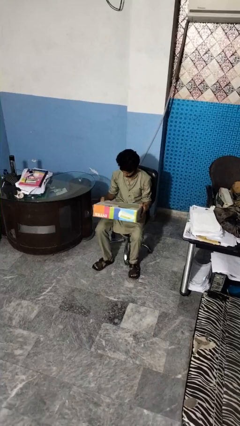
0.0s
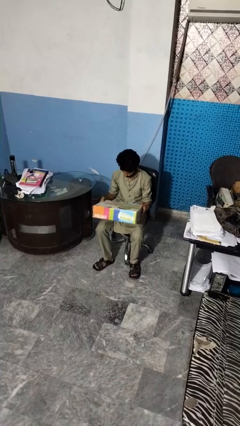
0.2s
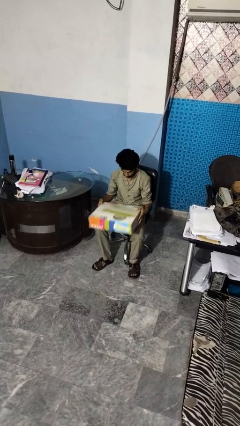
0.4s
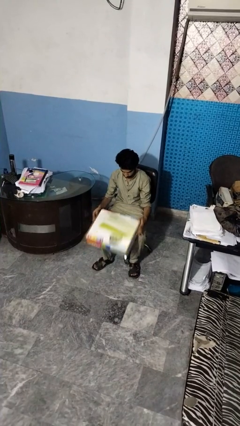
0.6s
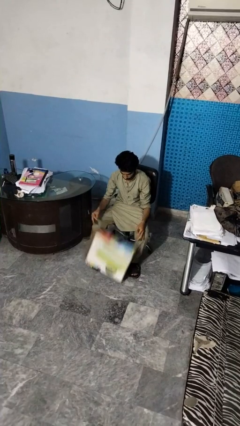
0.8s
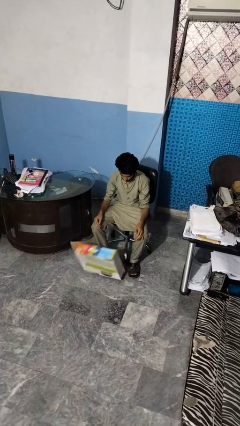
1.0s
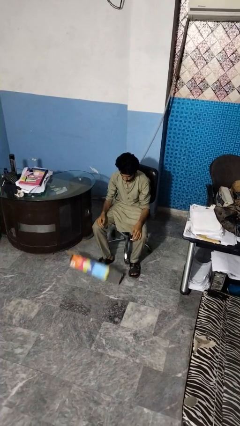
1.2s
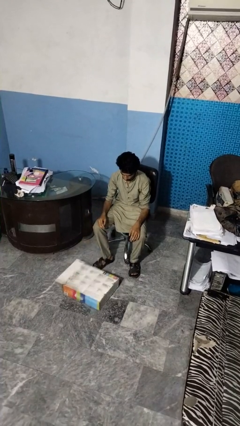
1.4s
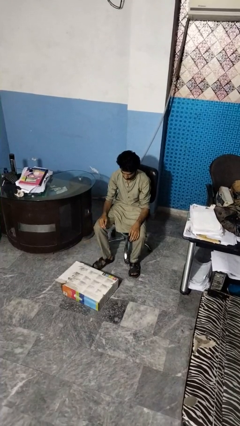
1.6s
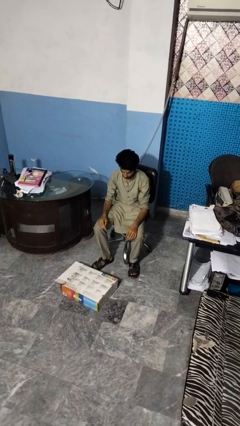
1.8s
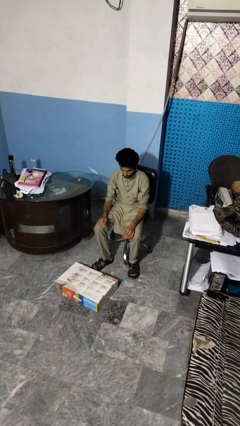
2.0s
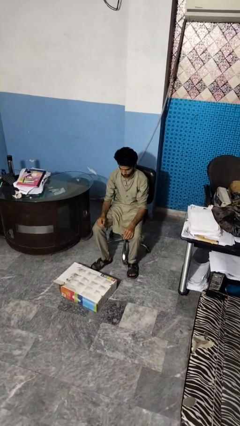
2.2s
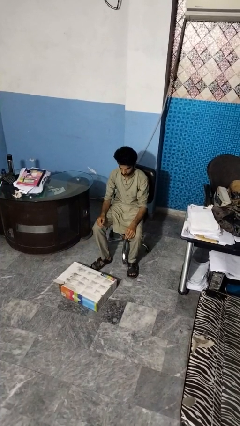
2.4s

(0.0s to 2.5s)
person drops object

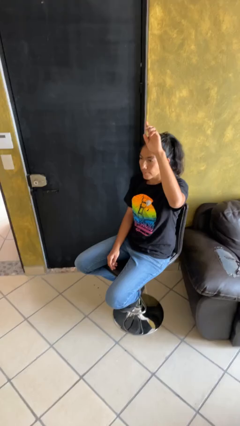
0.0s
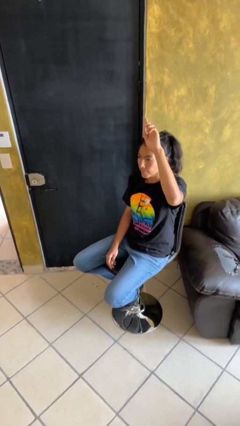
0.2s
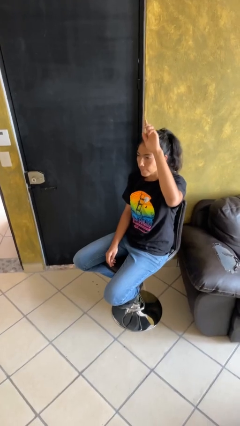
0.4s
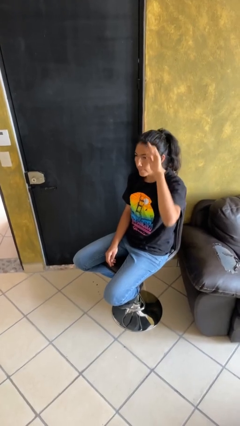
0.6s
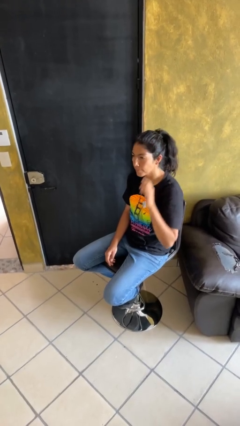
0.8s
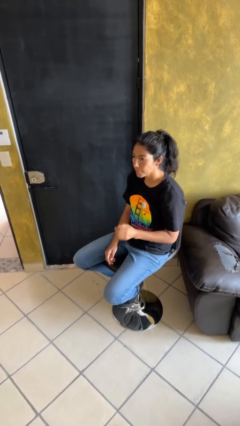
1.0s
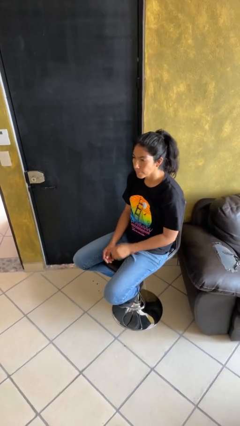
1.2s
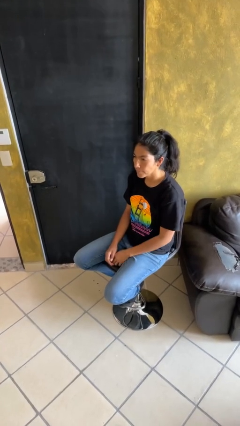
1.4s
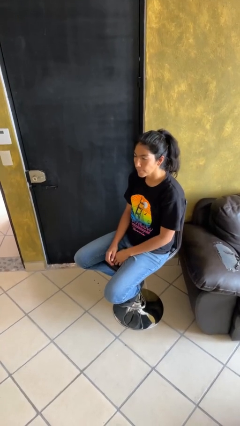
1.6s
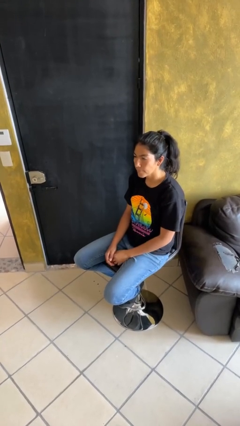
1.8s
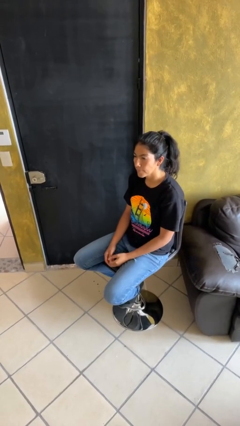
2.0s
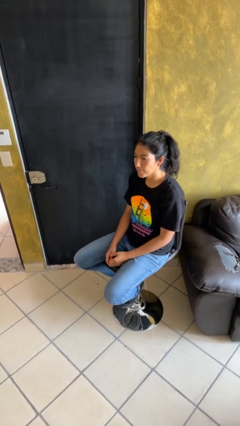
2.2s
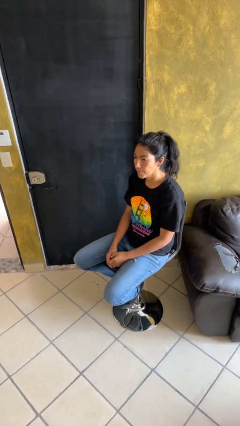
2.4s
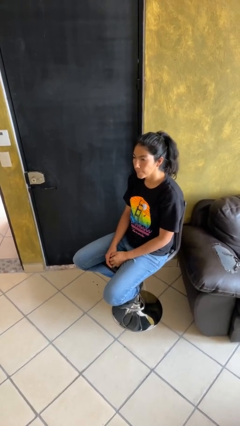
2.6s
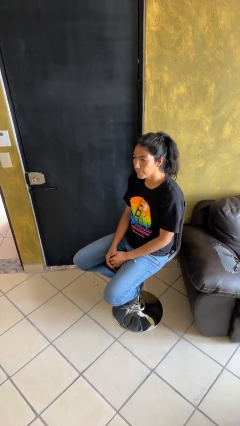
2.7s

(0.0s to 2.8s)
person gestures lower hand

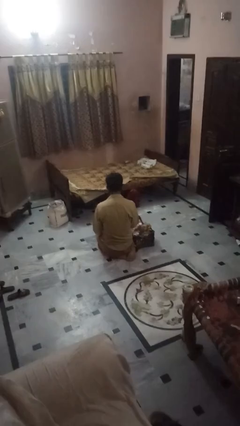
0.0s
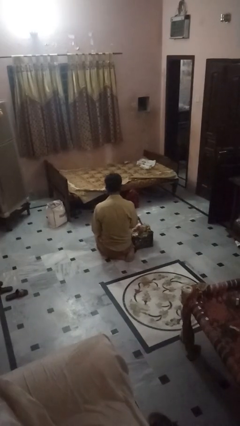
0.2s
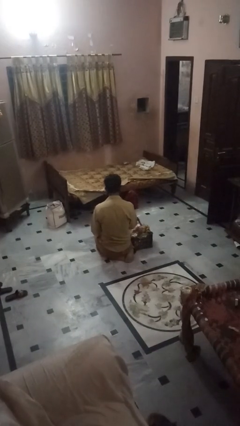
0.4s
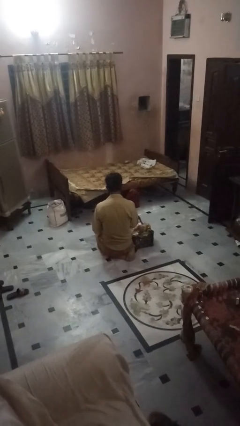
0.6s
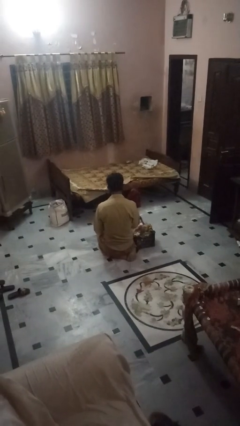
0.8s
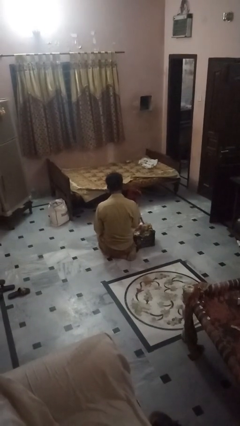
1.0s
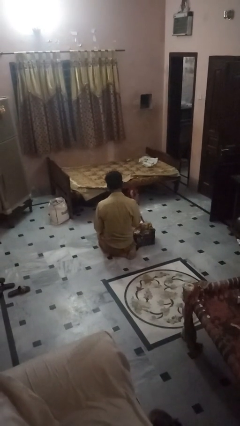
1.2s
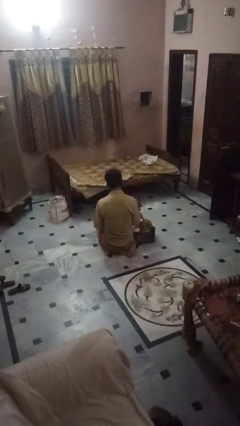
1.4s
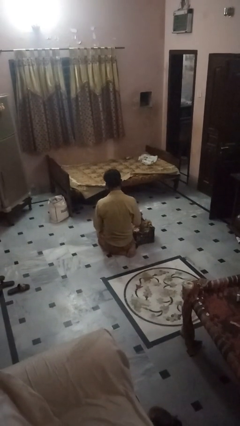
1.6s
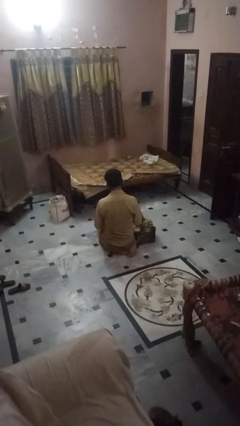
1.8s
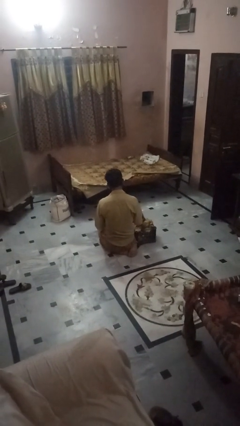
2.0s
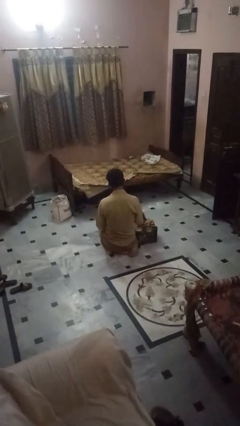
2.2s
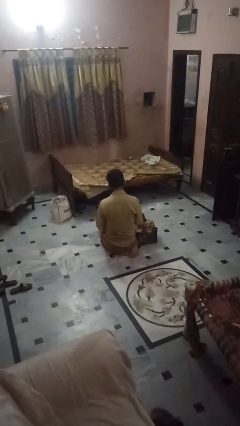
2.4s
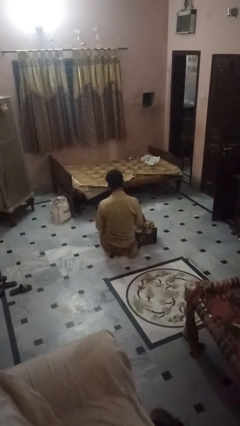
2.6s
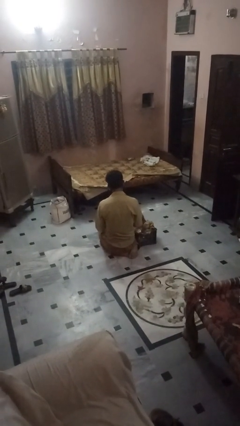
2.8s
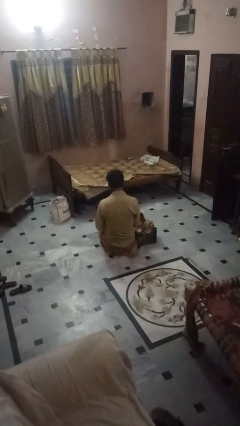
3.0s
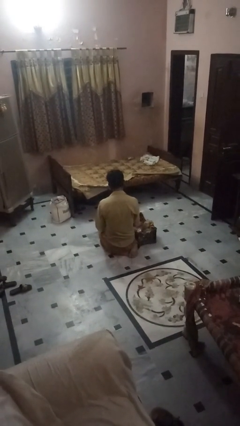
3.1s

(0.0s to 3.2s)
person puts object into bag

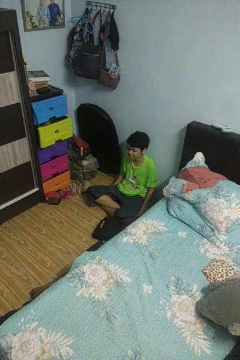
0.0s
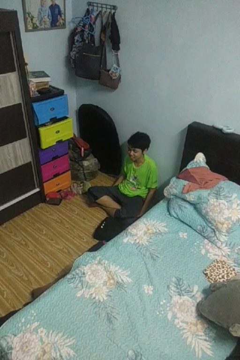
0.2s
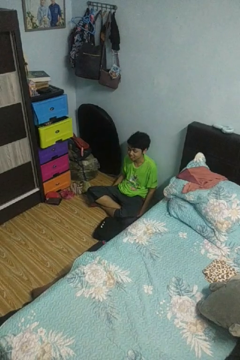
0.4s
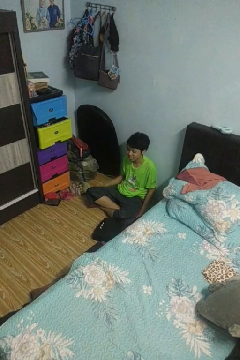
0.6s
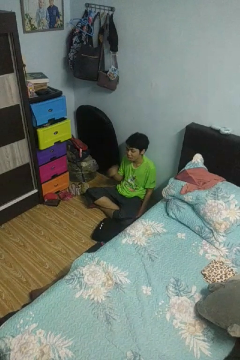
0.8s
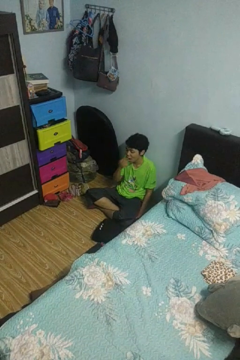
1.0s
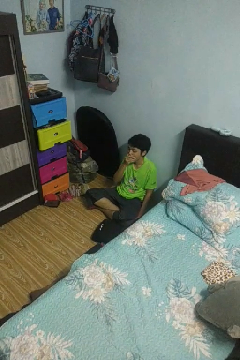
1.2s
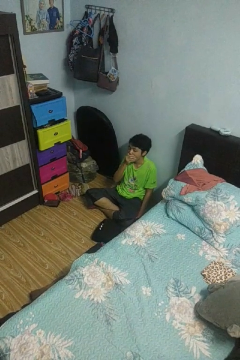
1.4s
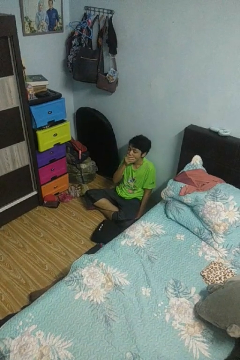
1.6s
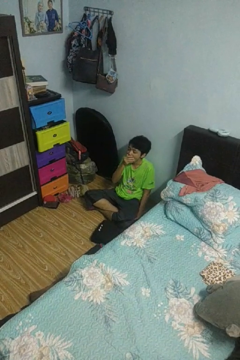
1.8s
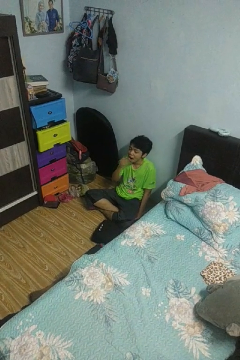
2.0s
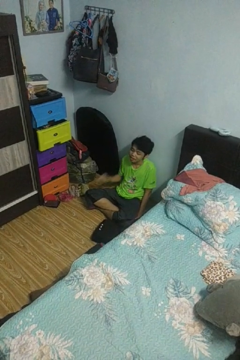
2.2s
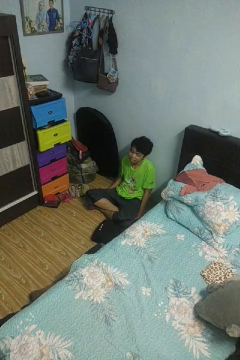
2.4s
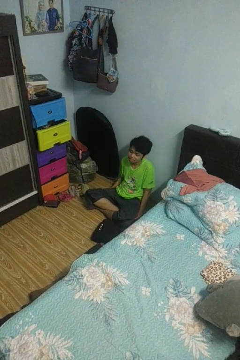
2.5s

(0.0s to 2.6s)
person yawns

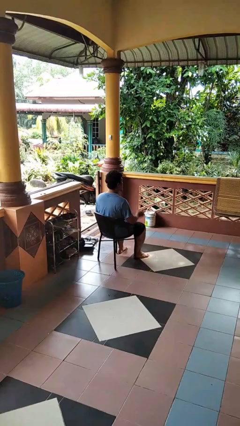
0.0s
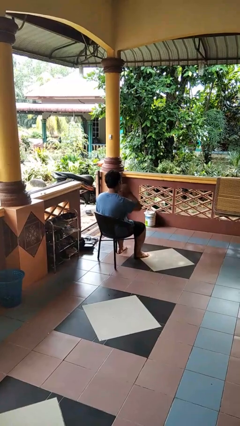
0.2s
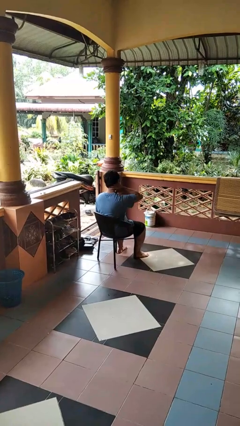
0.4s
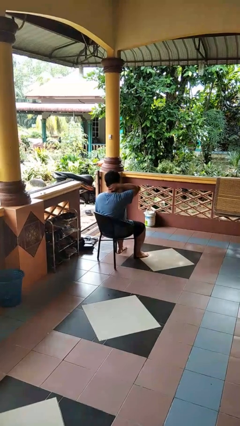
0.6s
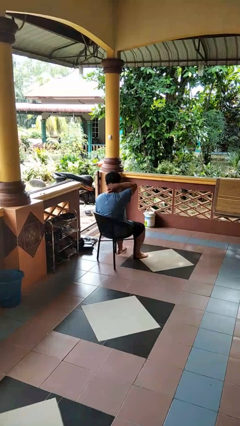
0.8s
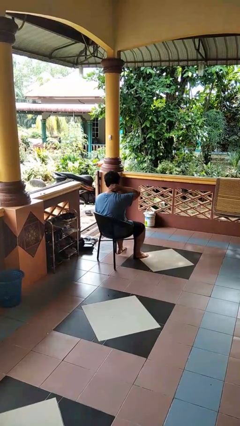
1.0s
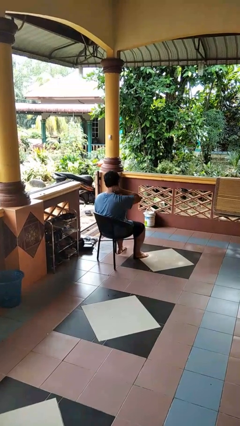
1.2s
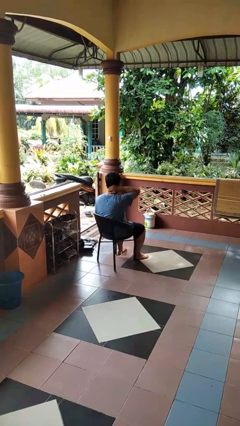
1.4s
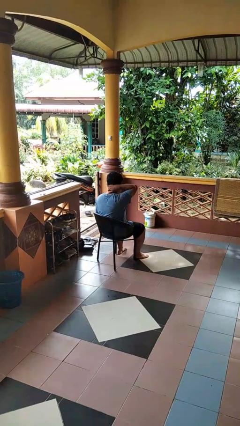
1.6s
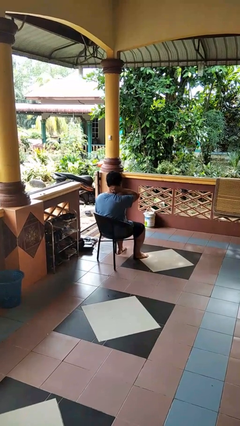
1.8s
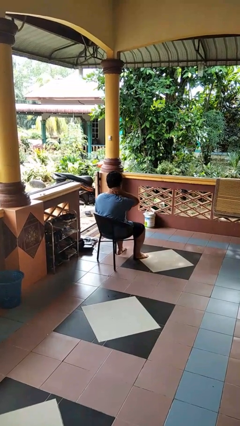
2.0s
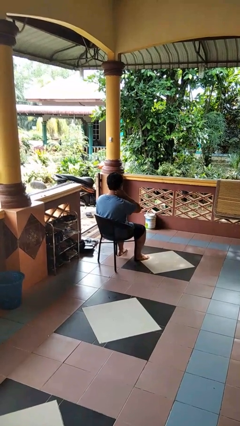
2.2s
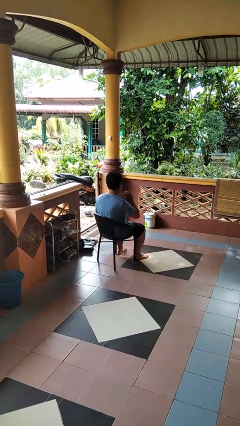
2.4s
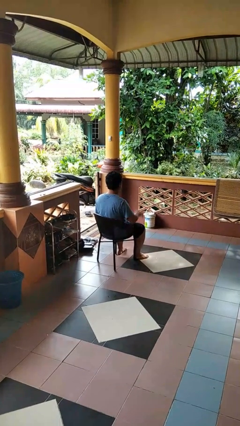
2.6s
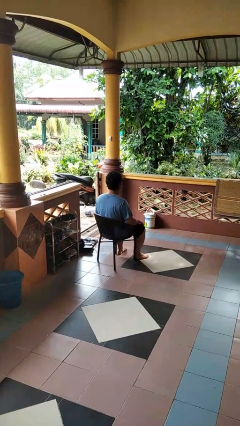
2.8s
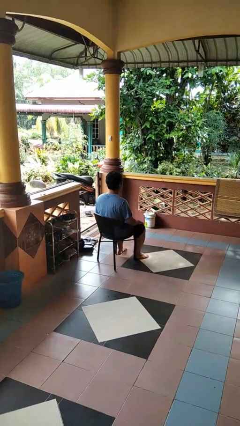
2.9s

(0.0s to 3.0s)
person rubs neck

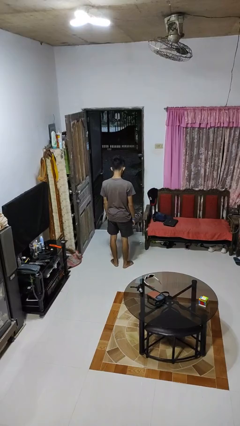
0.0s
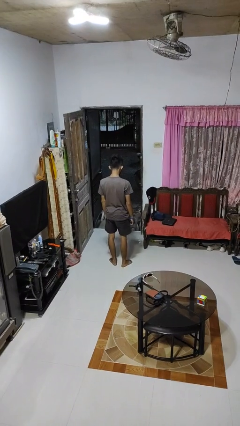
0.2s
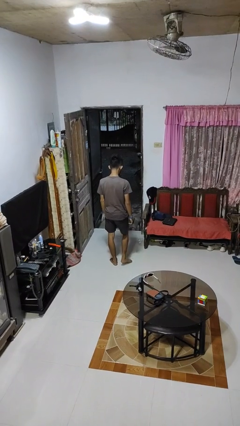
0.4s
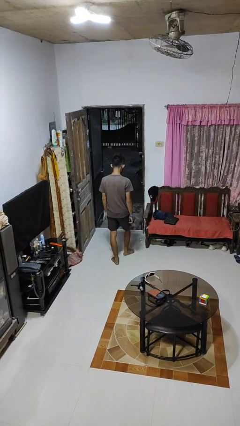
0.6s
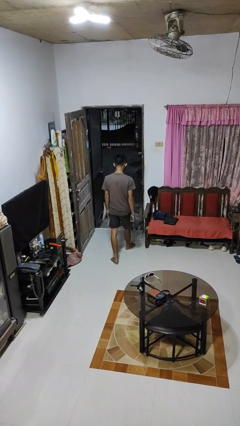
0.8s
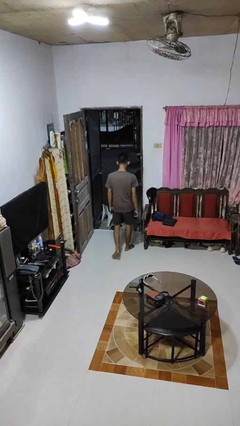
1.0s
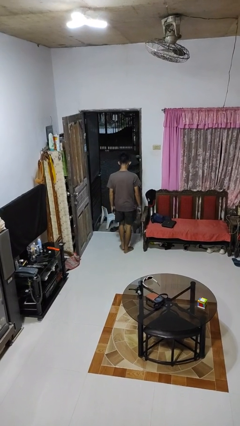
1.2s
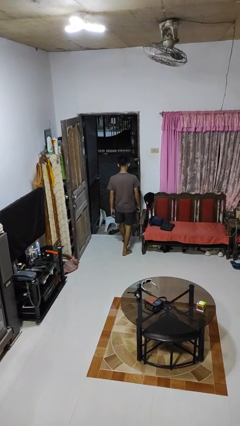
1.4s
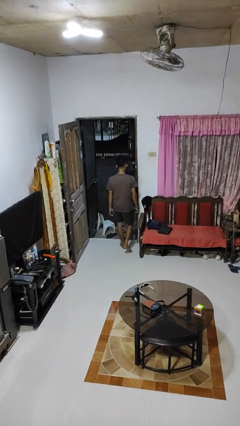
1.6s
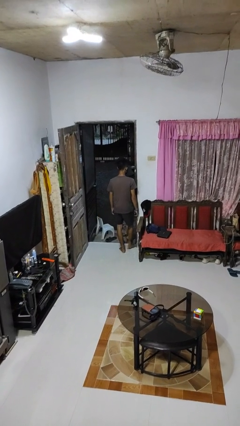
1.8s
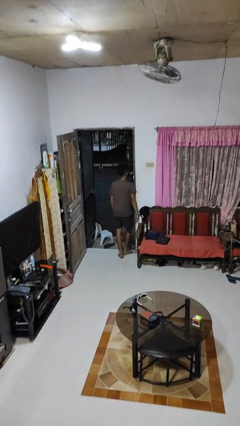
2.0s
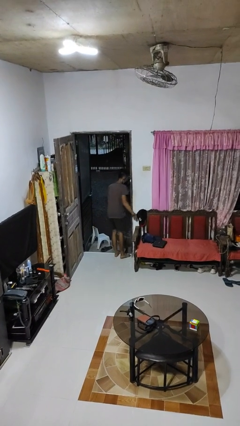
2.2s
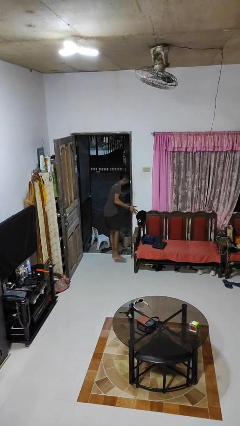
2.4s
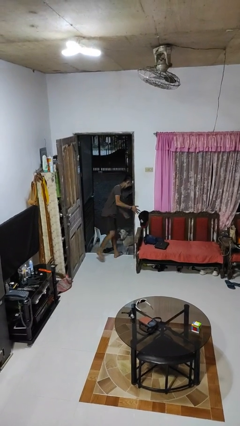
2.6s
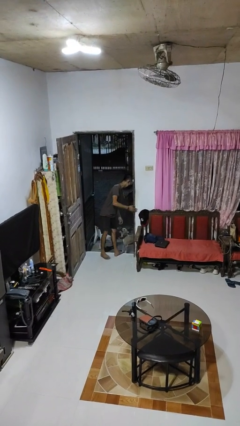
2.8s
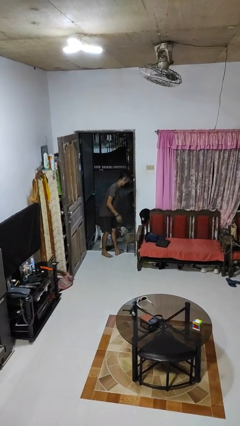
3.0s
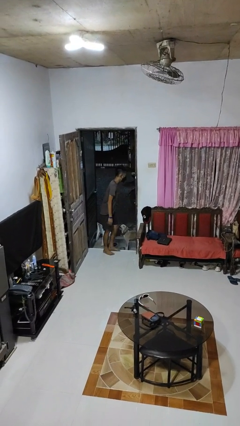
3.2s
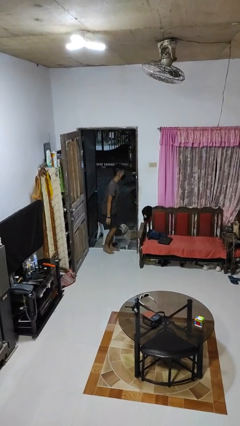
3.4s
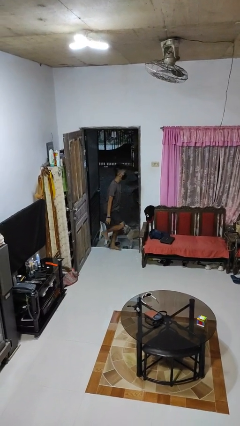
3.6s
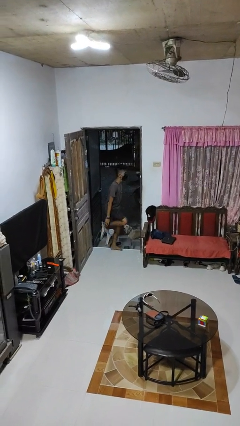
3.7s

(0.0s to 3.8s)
person bumps into wall
